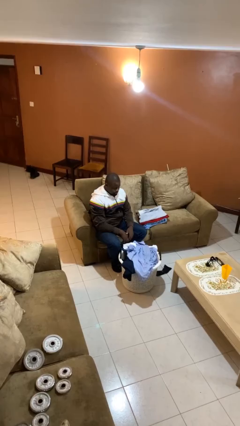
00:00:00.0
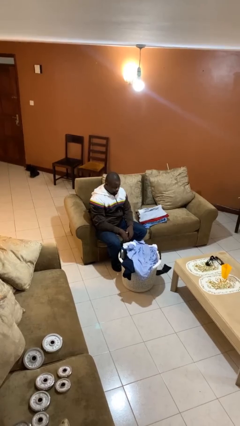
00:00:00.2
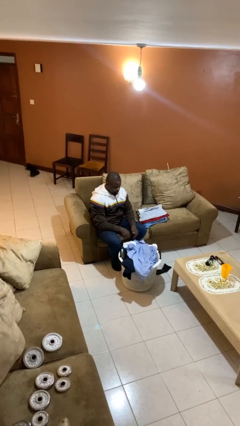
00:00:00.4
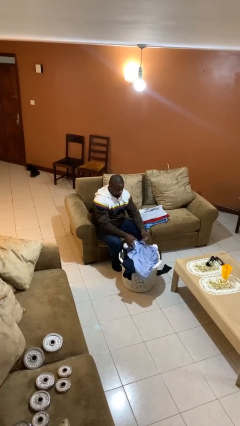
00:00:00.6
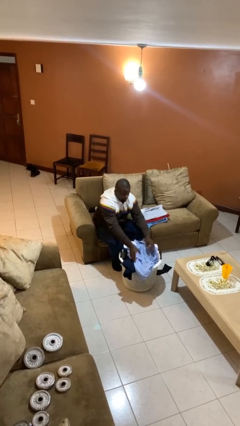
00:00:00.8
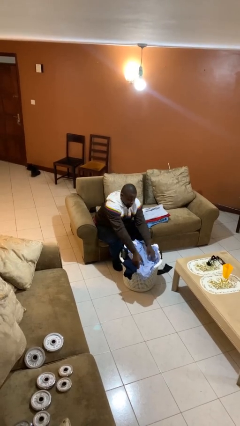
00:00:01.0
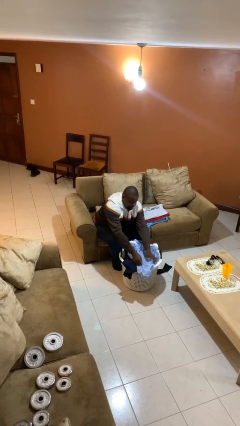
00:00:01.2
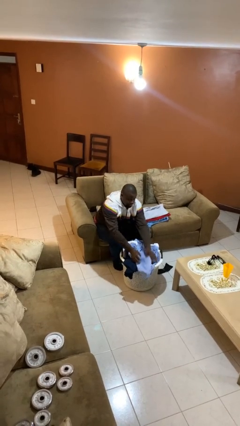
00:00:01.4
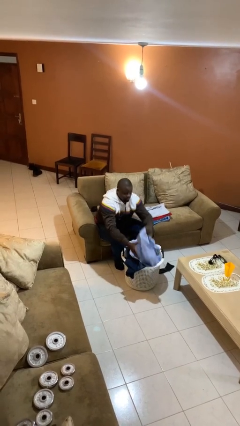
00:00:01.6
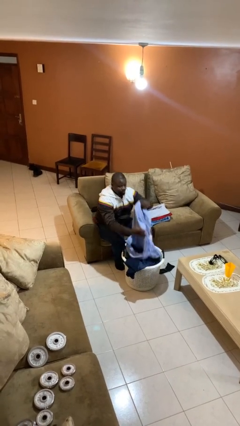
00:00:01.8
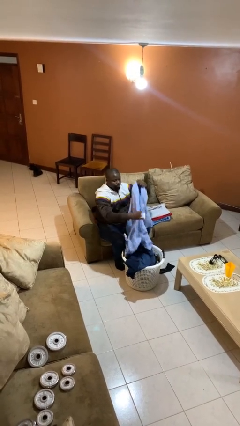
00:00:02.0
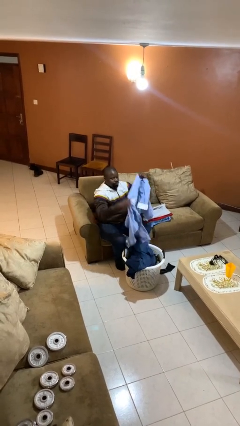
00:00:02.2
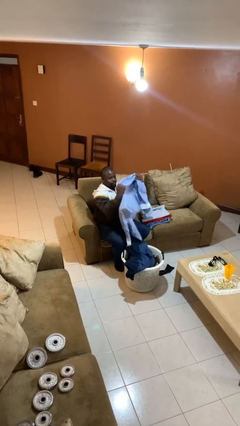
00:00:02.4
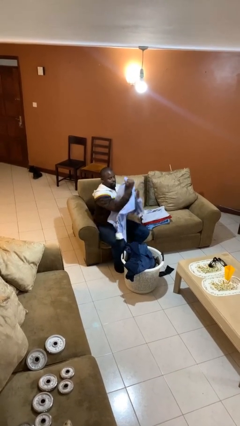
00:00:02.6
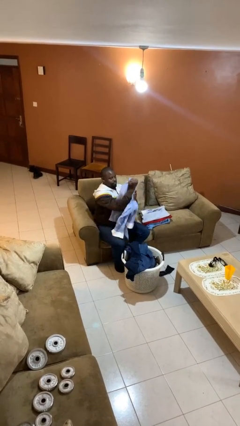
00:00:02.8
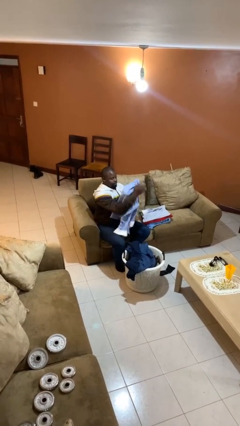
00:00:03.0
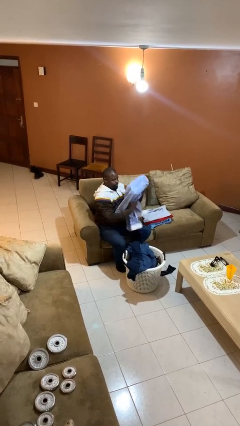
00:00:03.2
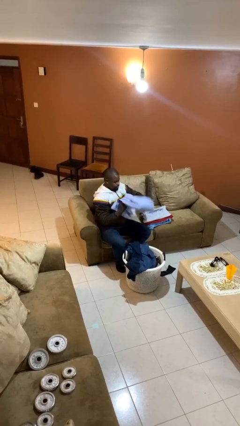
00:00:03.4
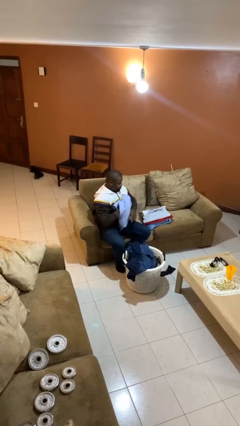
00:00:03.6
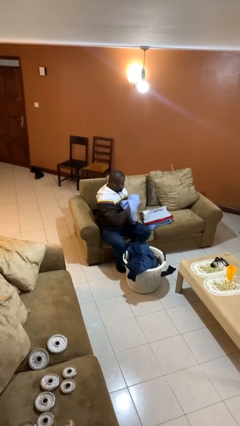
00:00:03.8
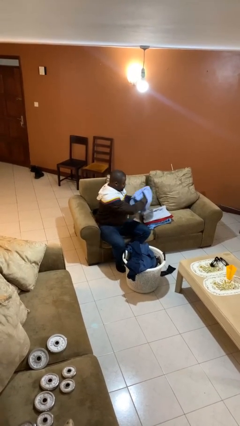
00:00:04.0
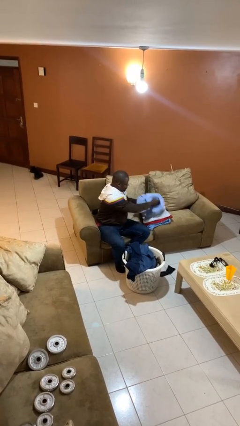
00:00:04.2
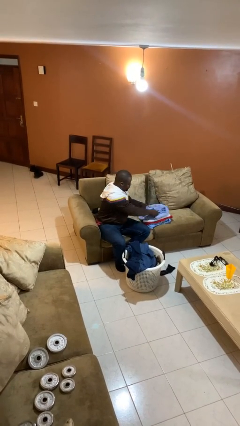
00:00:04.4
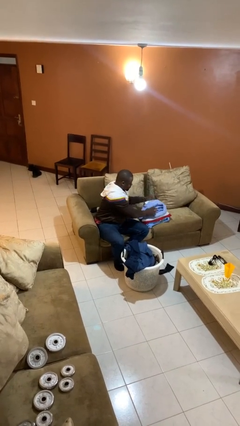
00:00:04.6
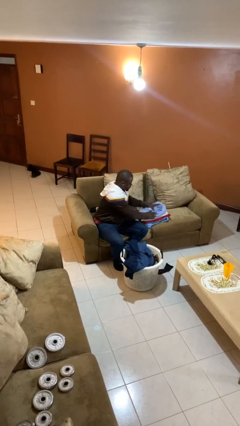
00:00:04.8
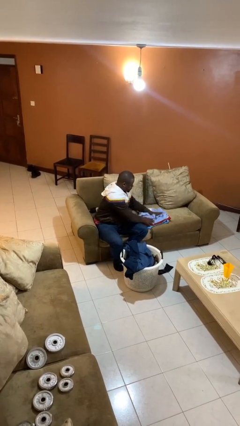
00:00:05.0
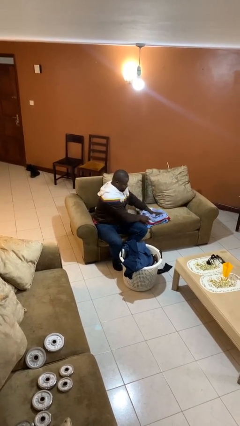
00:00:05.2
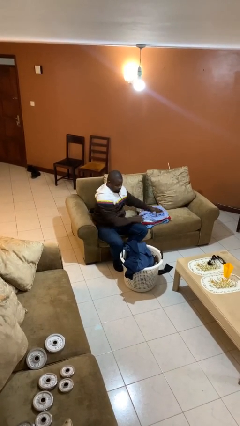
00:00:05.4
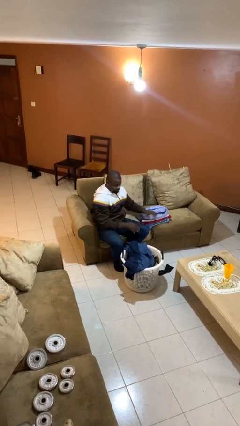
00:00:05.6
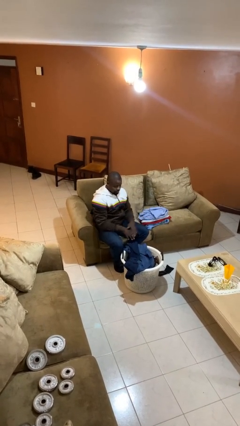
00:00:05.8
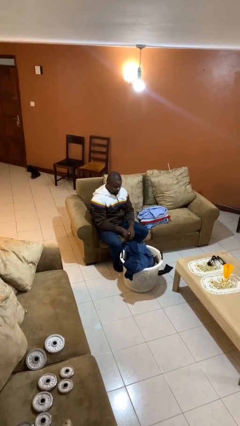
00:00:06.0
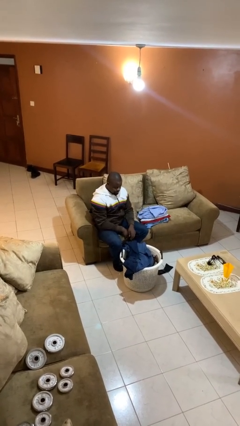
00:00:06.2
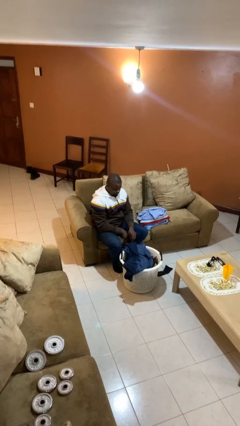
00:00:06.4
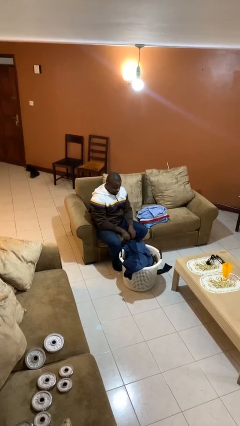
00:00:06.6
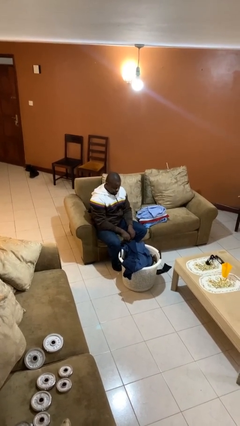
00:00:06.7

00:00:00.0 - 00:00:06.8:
person folds shirt

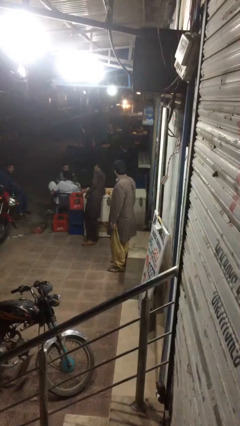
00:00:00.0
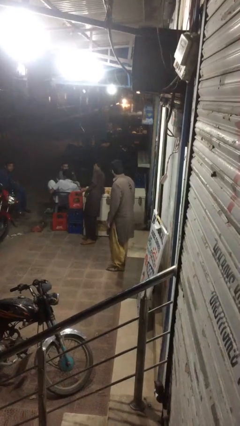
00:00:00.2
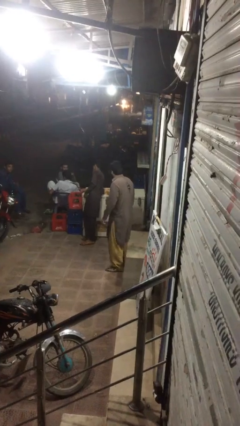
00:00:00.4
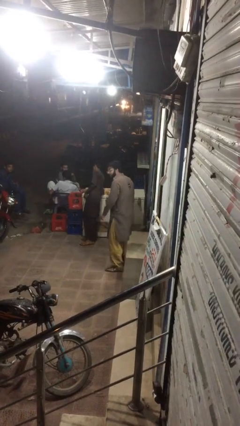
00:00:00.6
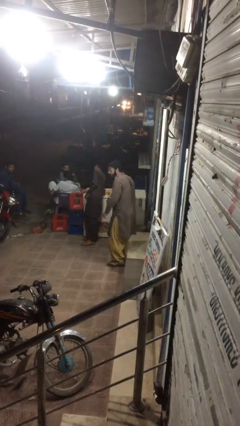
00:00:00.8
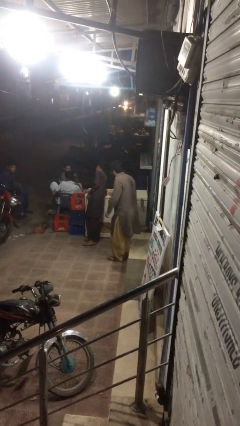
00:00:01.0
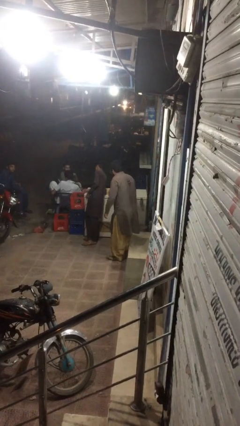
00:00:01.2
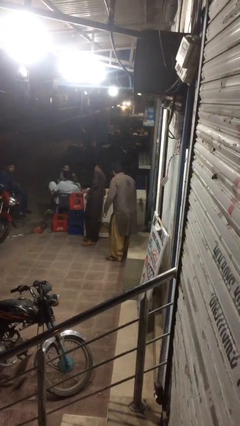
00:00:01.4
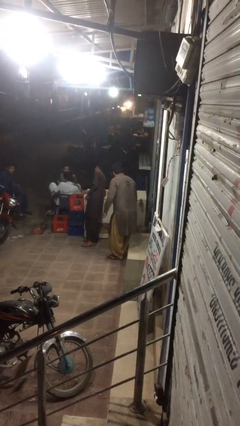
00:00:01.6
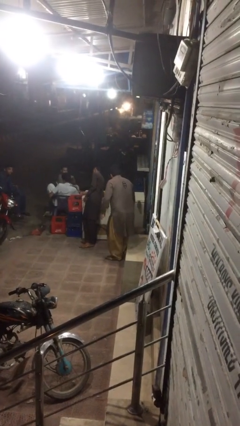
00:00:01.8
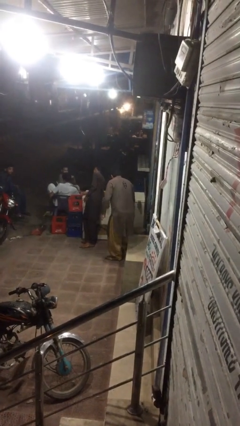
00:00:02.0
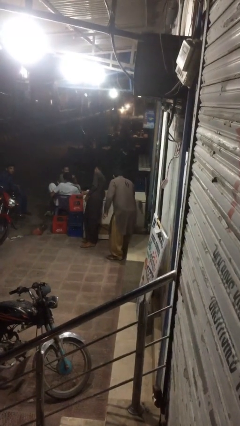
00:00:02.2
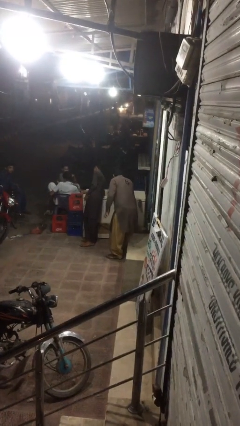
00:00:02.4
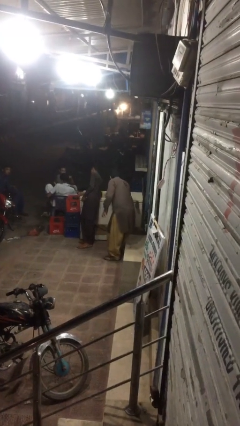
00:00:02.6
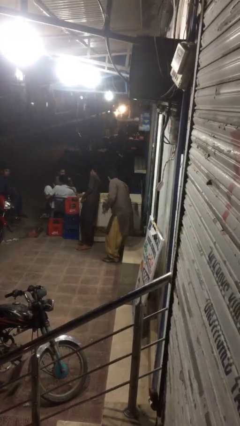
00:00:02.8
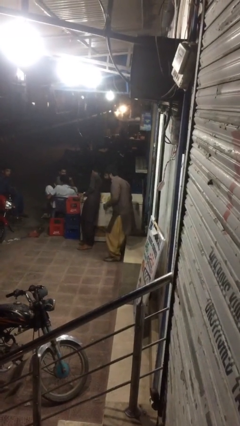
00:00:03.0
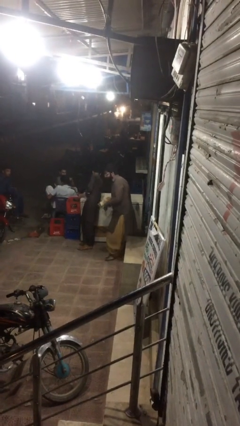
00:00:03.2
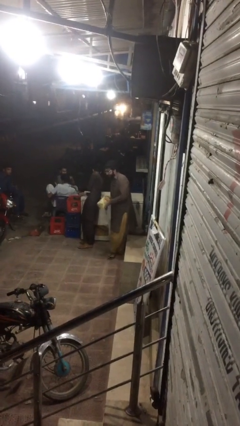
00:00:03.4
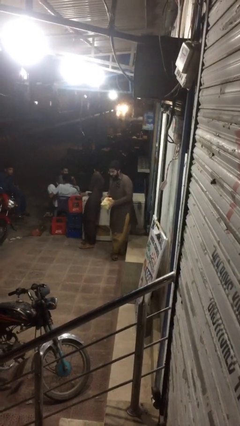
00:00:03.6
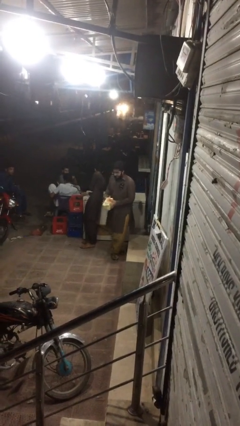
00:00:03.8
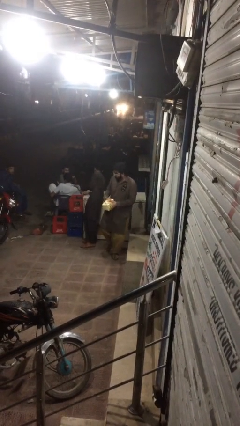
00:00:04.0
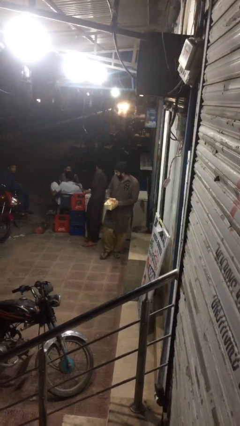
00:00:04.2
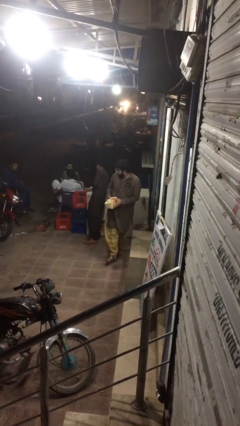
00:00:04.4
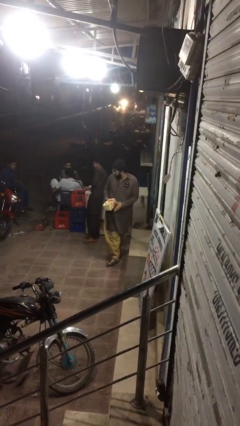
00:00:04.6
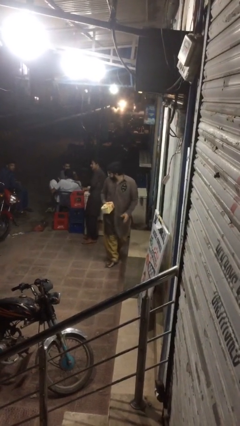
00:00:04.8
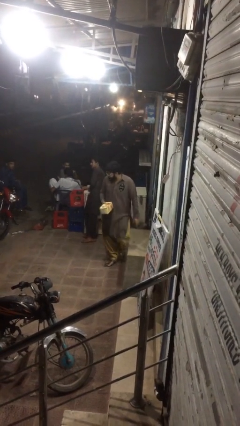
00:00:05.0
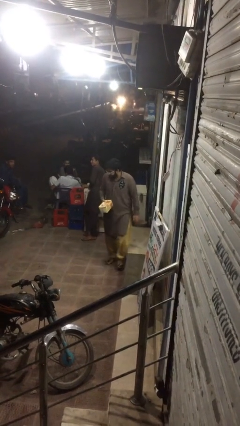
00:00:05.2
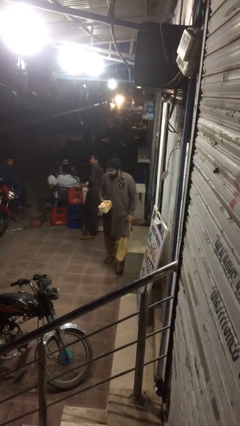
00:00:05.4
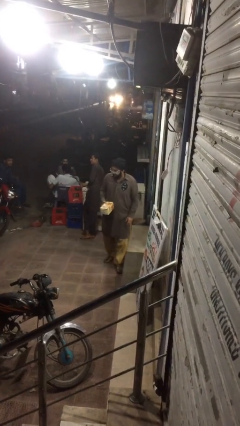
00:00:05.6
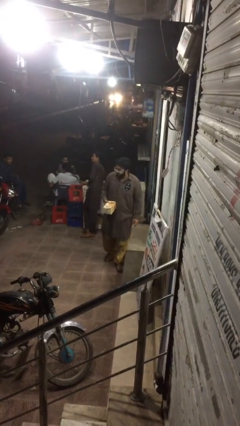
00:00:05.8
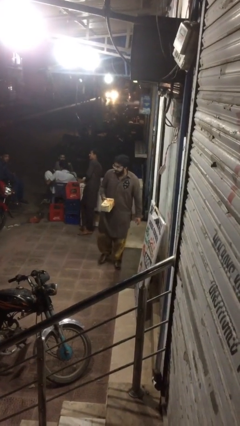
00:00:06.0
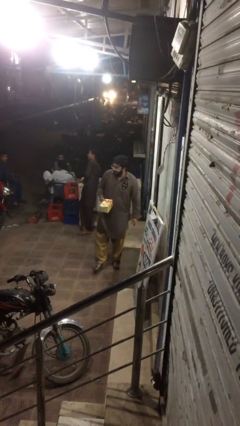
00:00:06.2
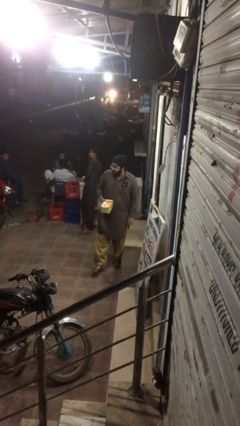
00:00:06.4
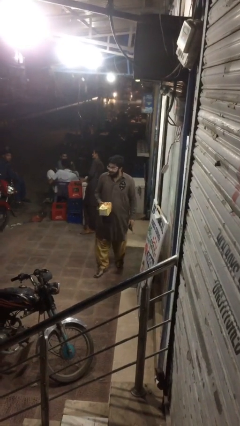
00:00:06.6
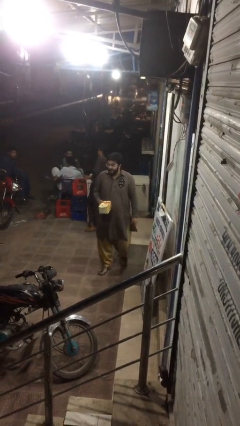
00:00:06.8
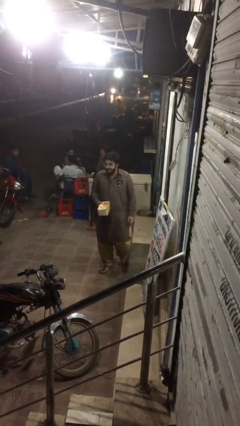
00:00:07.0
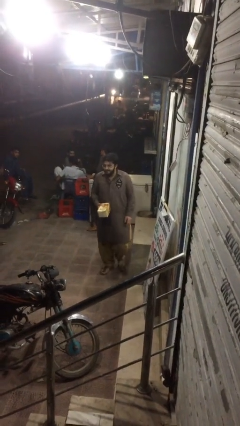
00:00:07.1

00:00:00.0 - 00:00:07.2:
person steals object from person

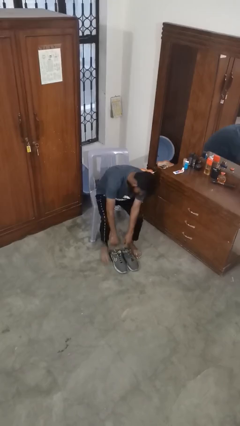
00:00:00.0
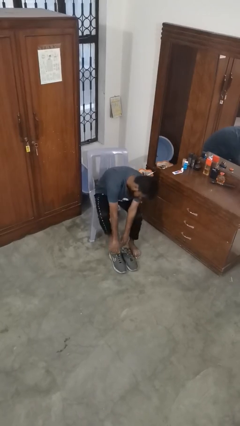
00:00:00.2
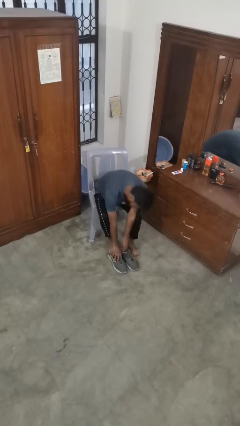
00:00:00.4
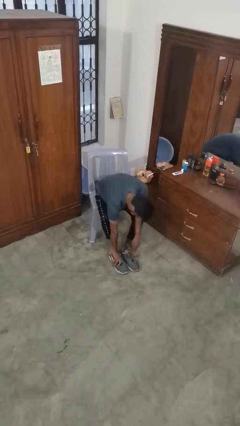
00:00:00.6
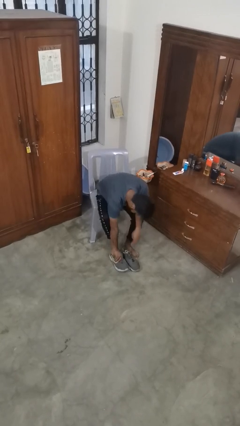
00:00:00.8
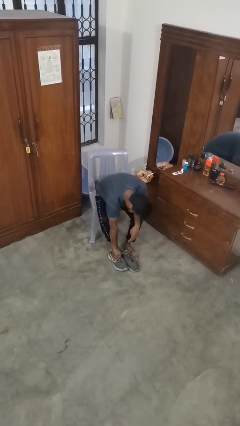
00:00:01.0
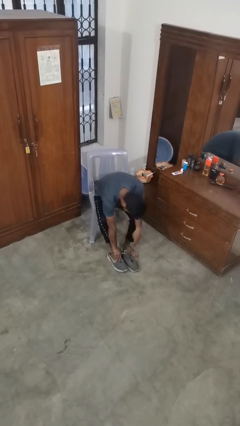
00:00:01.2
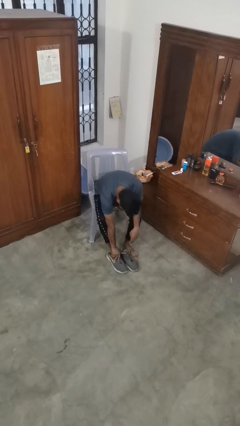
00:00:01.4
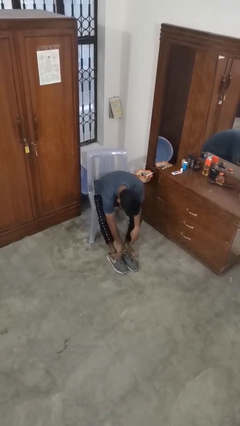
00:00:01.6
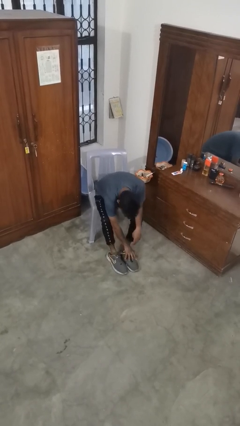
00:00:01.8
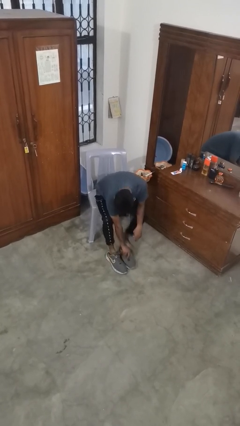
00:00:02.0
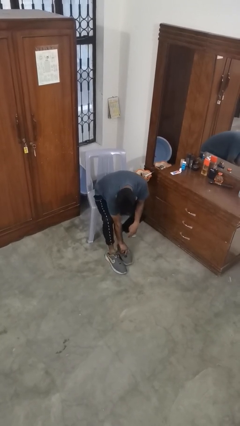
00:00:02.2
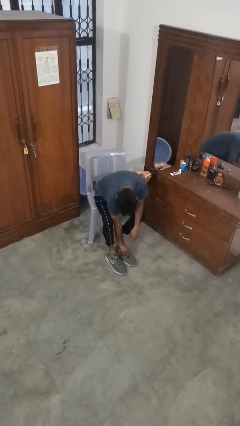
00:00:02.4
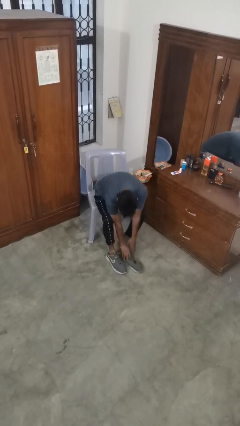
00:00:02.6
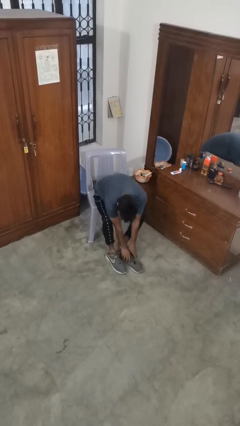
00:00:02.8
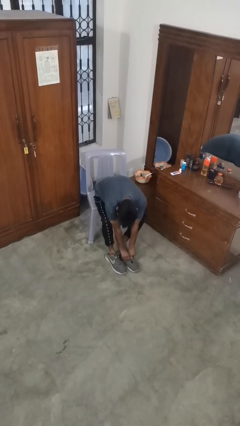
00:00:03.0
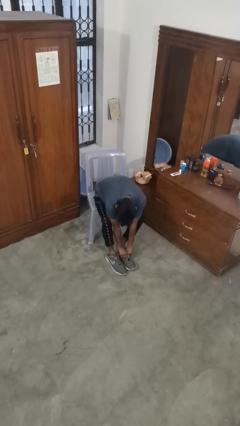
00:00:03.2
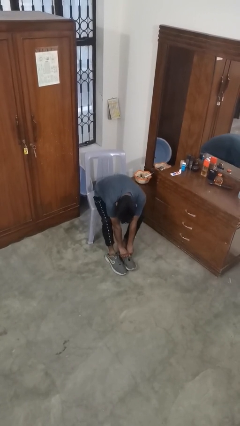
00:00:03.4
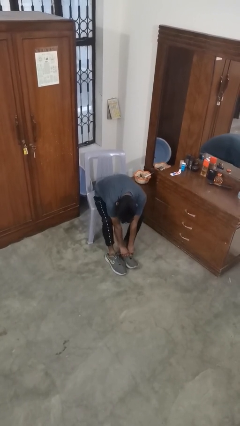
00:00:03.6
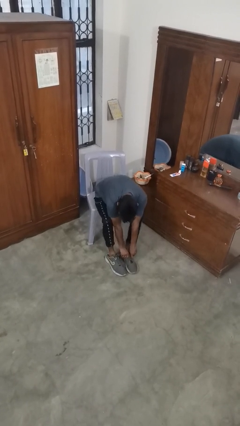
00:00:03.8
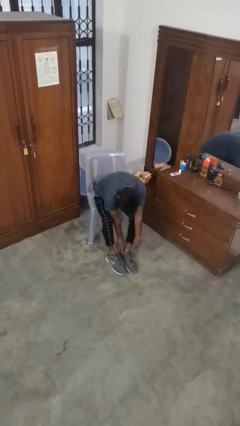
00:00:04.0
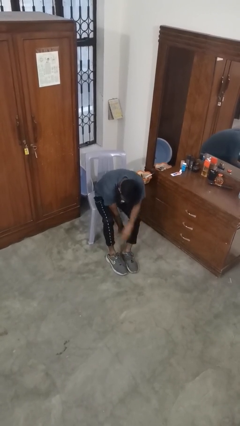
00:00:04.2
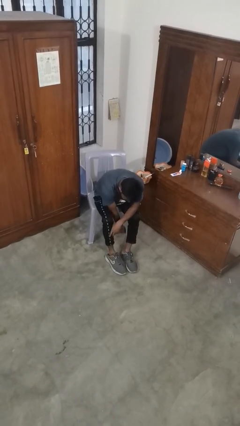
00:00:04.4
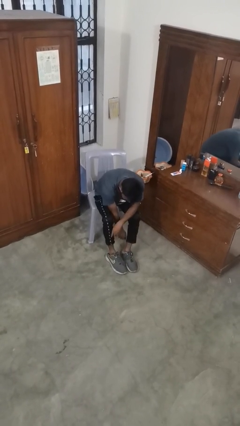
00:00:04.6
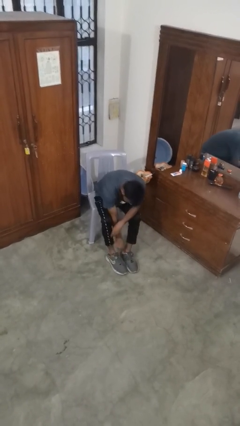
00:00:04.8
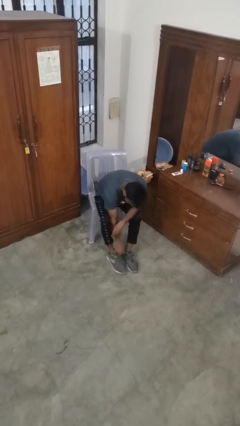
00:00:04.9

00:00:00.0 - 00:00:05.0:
person puts on shoes
